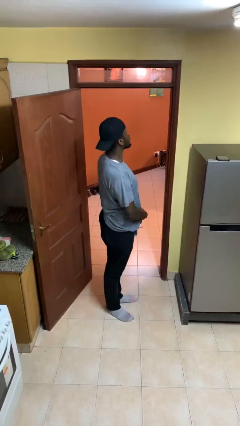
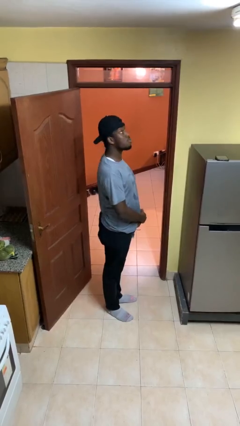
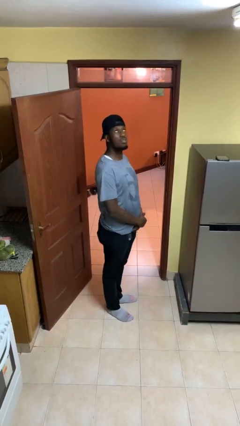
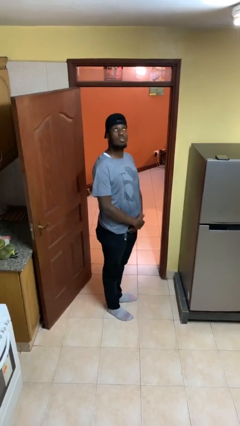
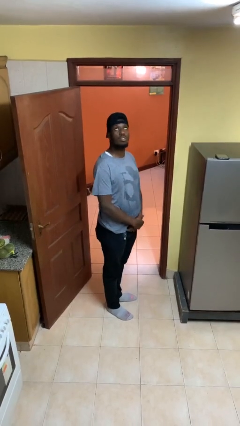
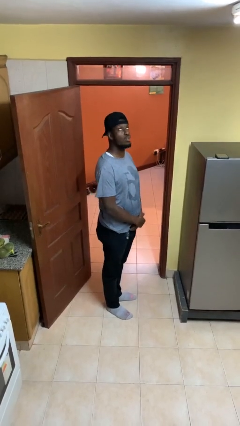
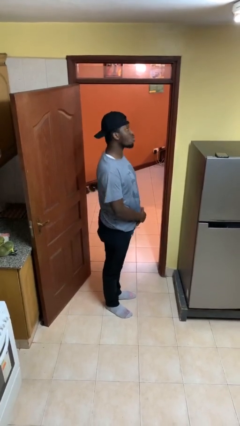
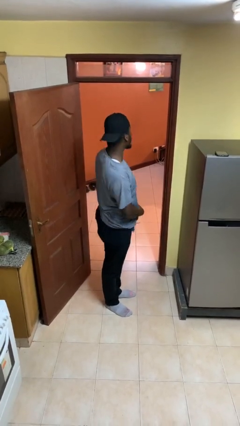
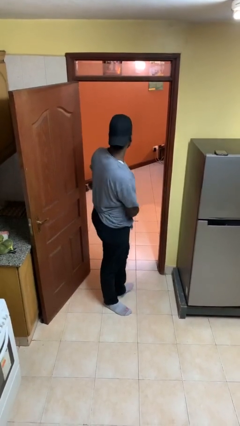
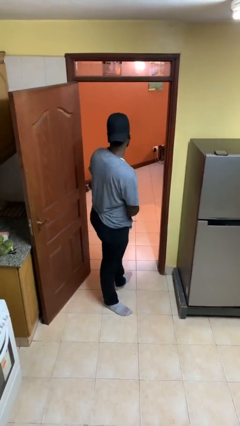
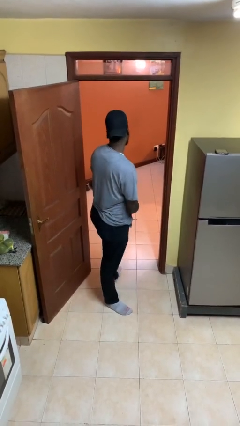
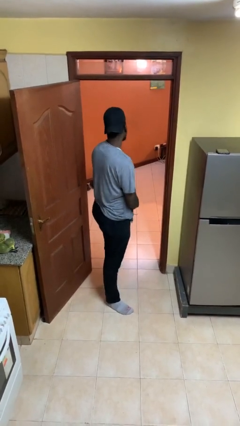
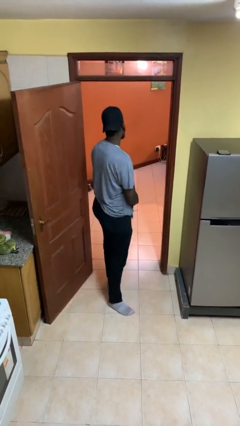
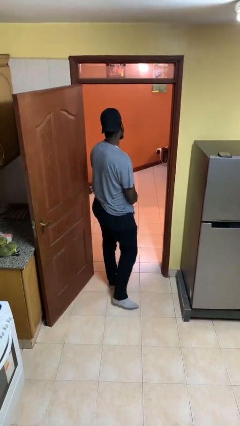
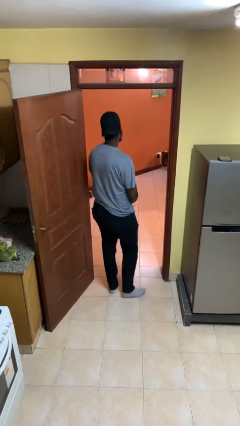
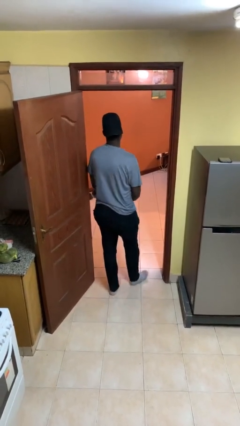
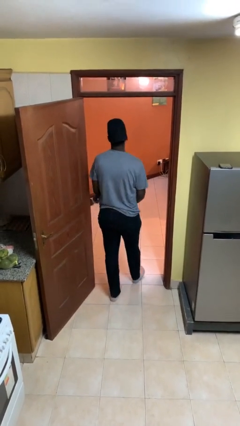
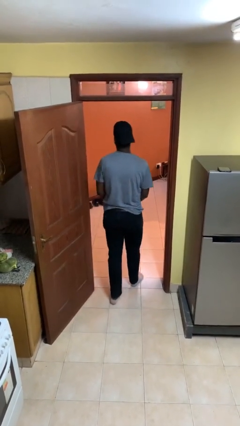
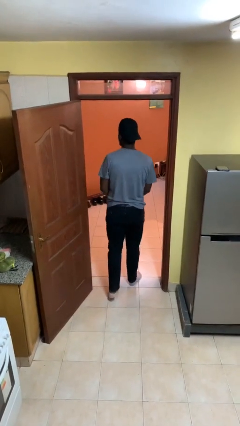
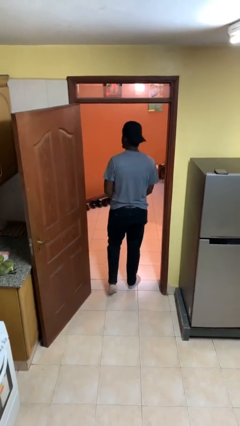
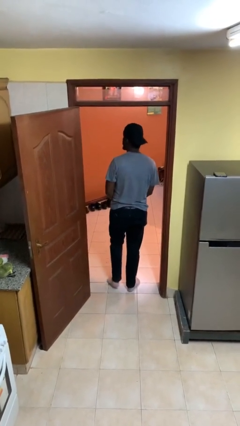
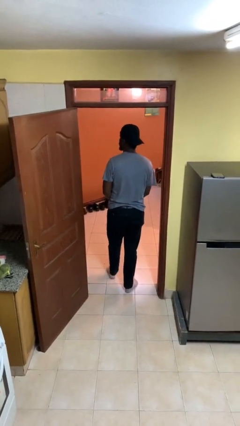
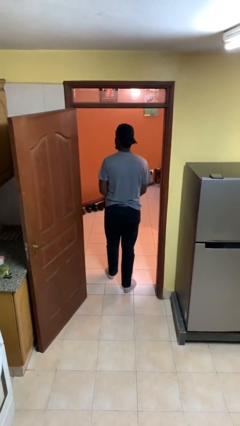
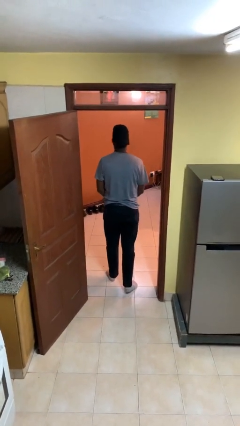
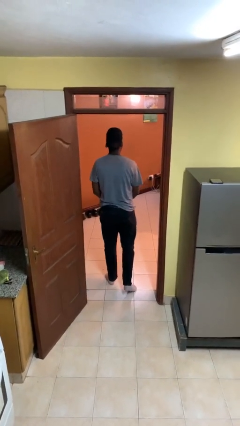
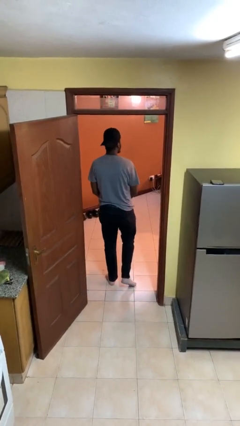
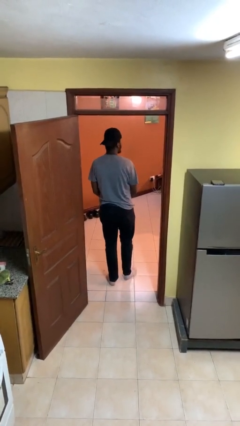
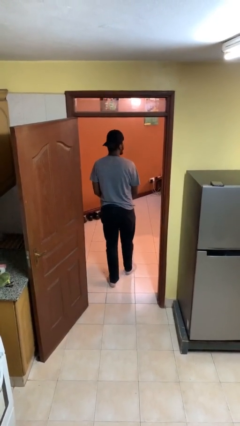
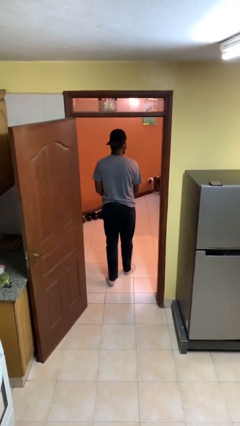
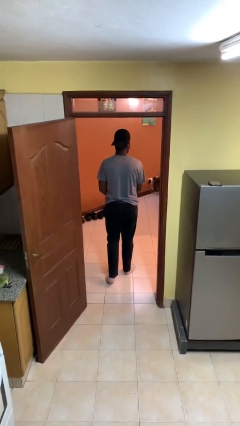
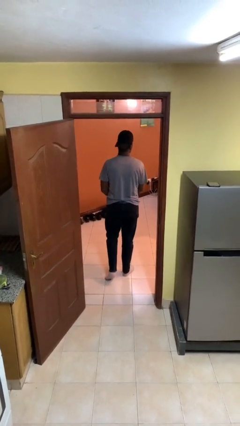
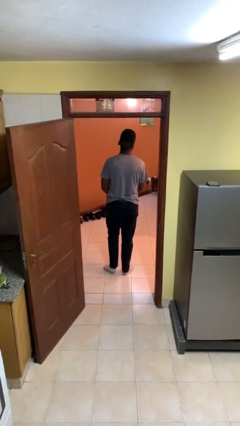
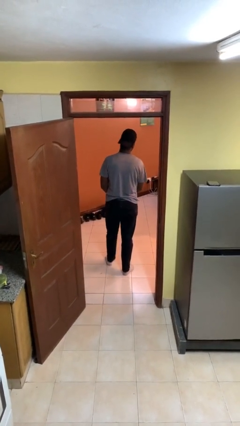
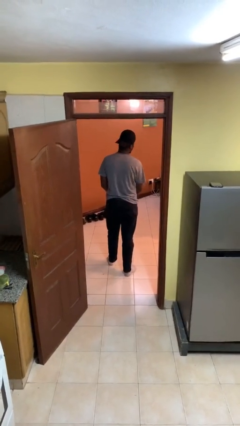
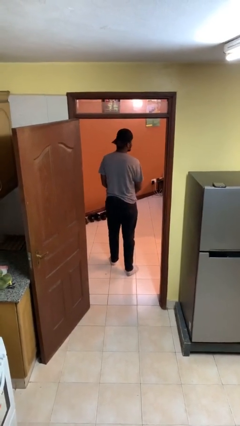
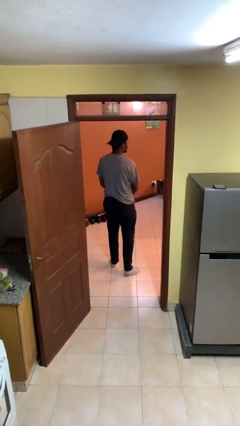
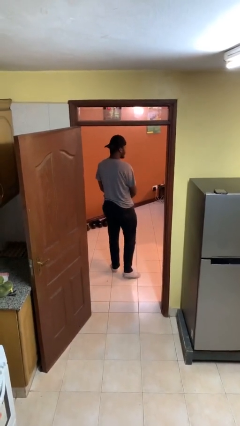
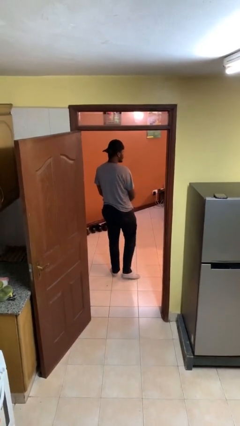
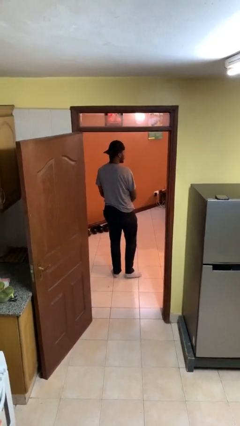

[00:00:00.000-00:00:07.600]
person exits scene through structure

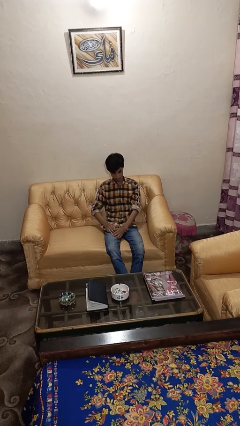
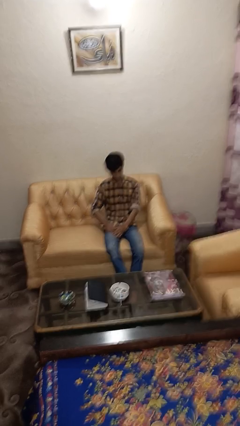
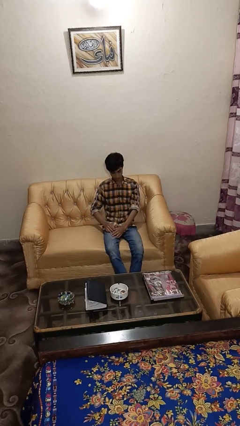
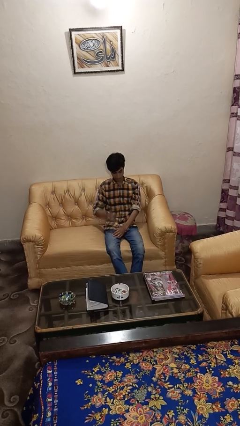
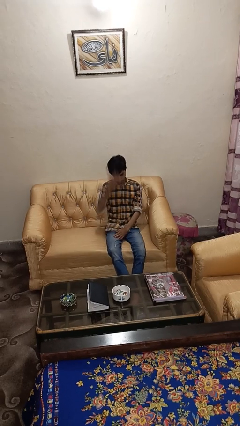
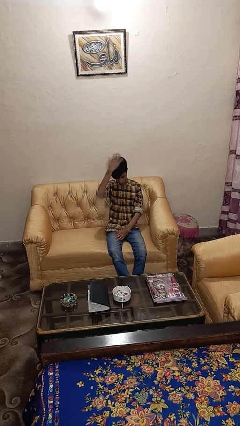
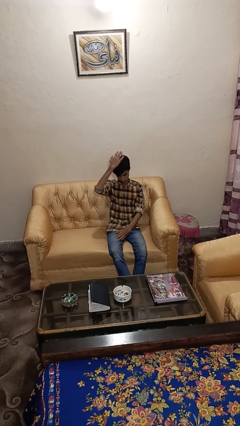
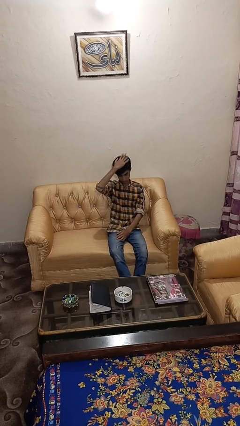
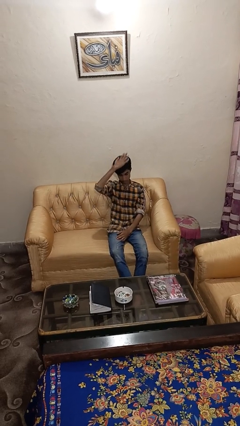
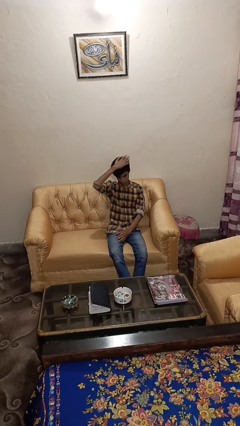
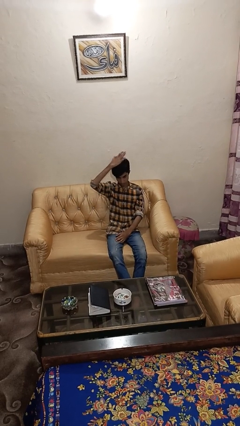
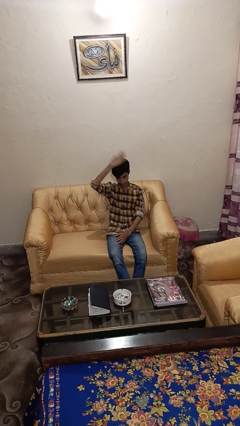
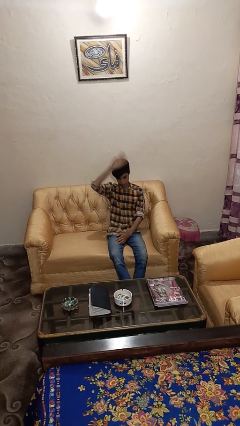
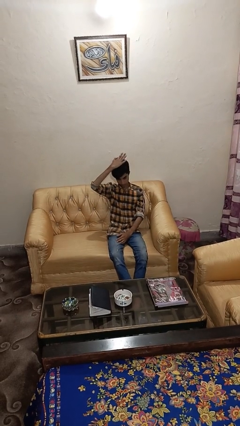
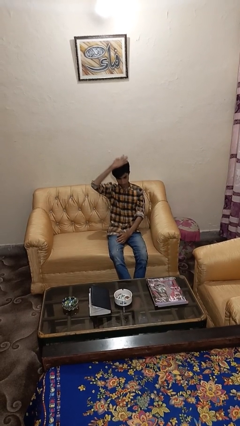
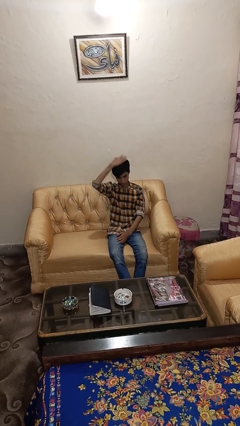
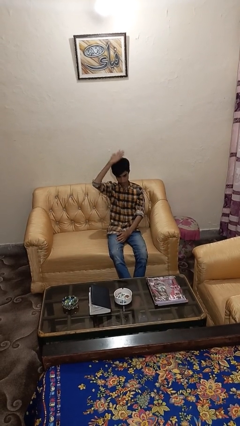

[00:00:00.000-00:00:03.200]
person pats head

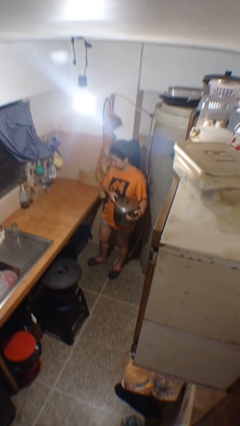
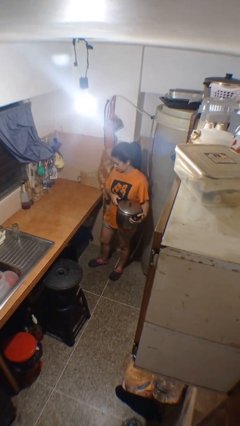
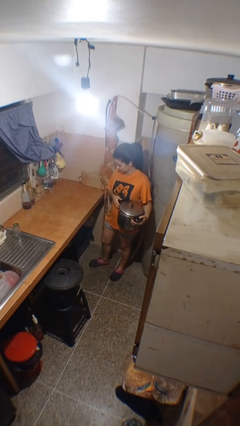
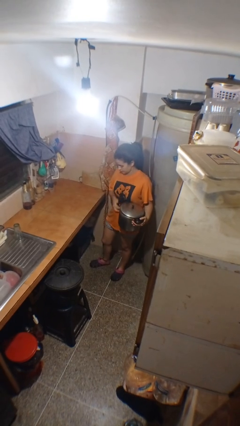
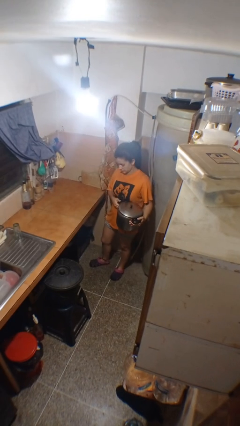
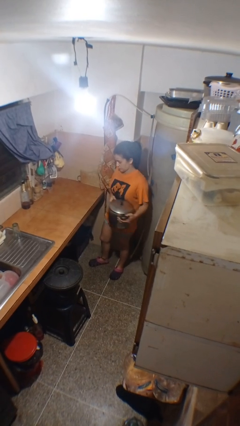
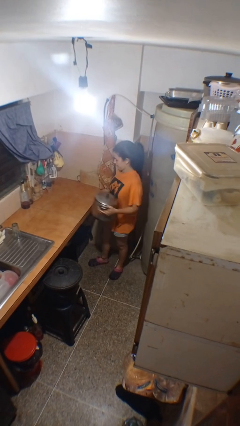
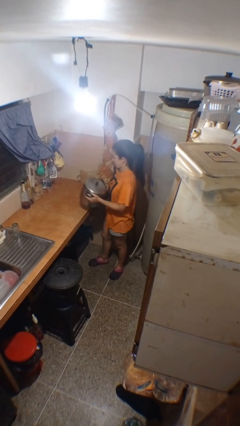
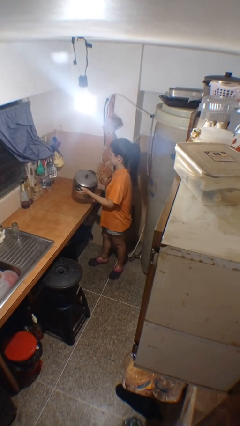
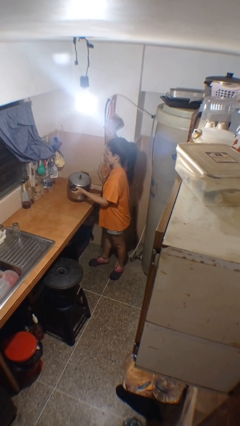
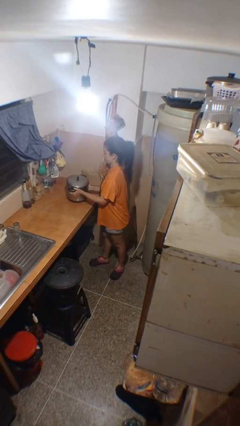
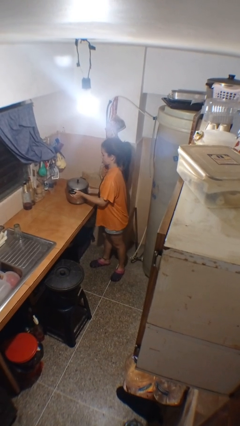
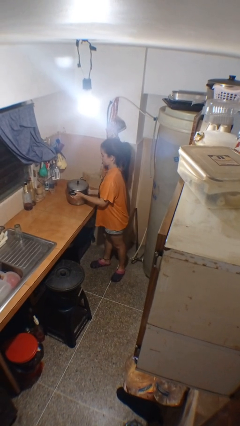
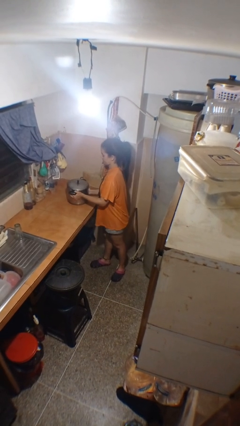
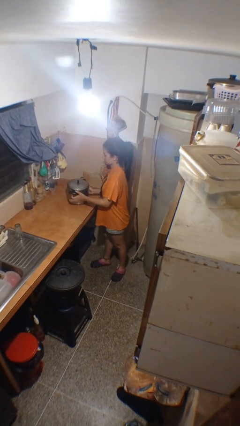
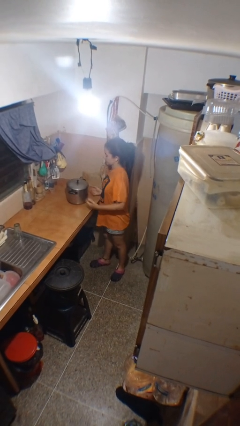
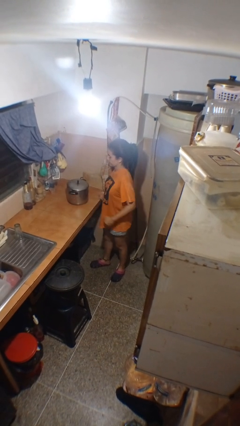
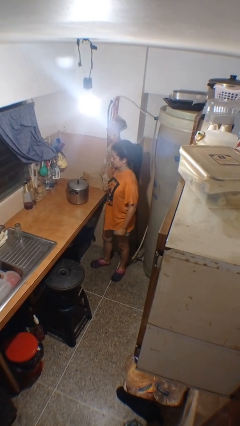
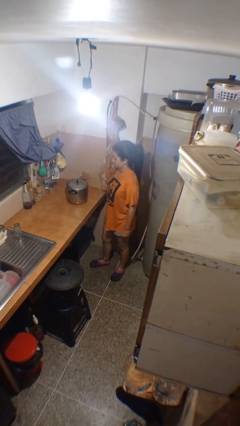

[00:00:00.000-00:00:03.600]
person puts down object on countertop

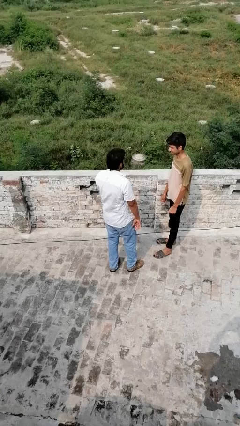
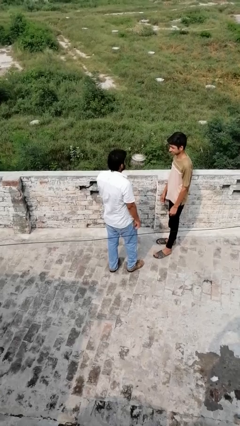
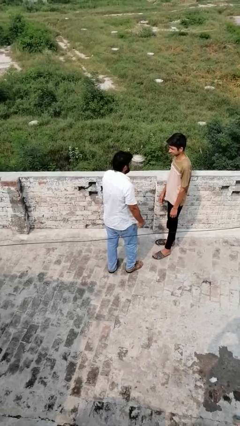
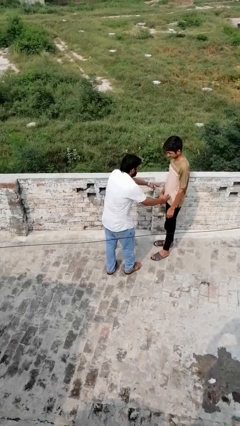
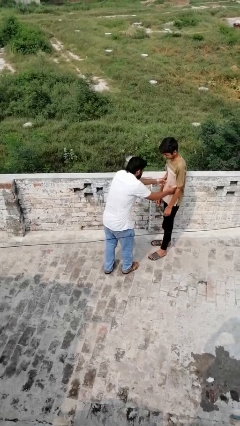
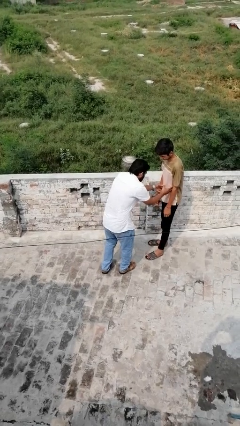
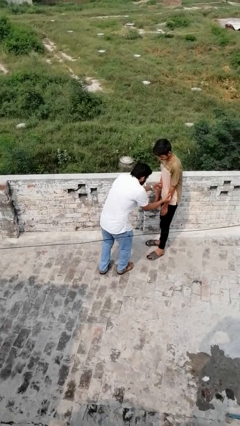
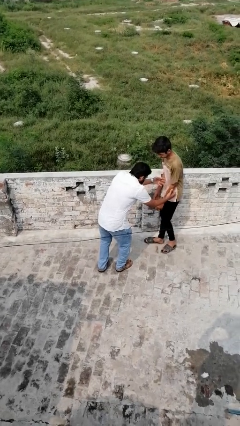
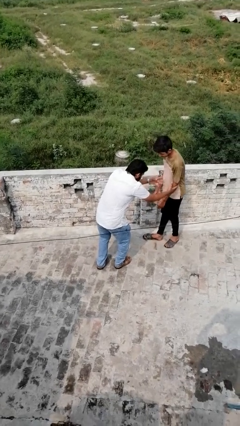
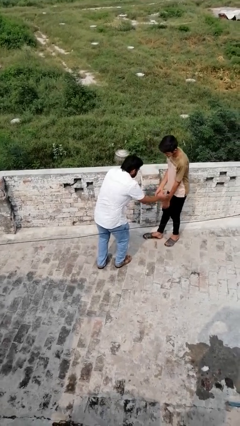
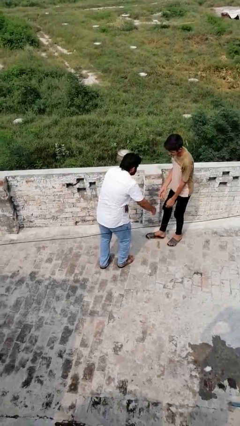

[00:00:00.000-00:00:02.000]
person tickles person

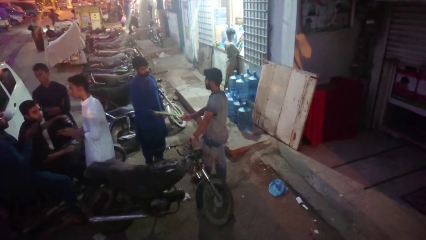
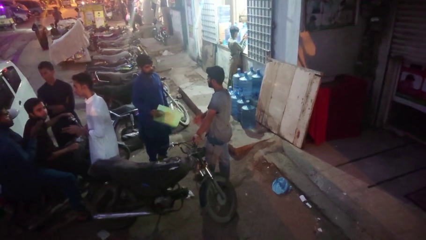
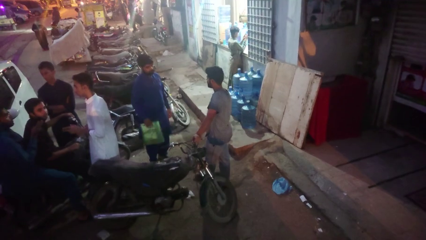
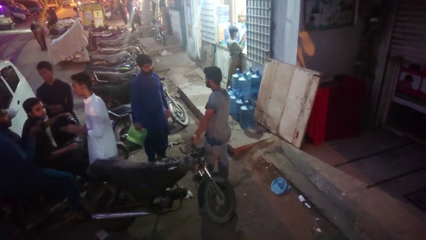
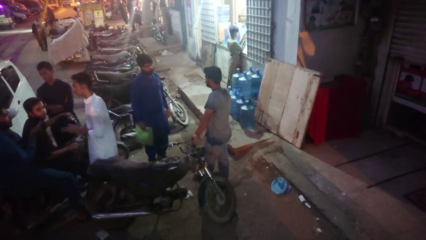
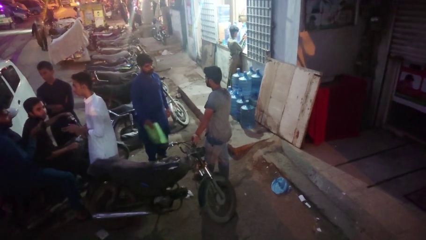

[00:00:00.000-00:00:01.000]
person transfers object to person

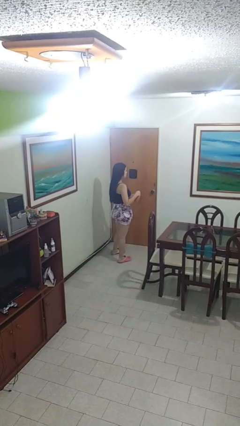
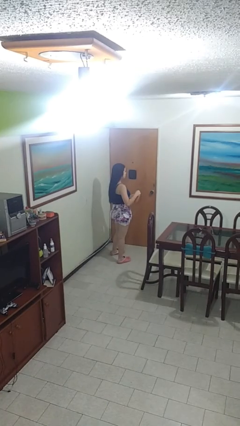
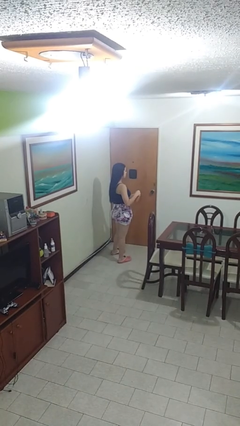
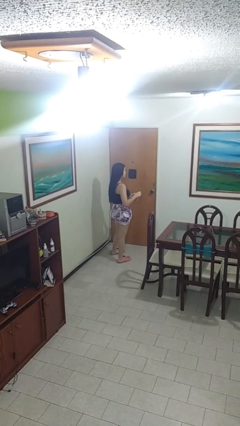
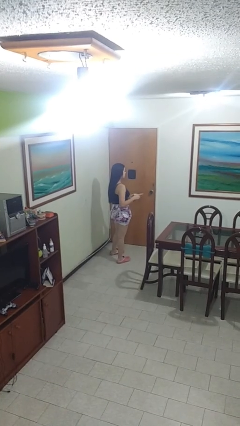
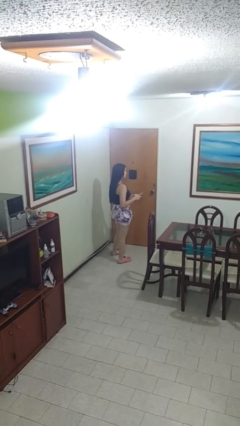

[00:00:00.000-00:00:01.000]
person stirs mug
